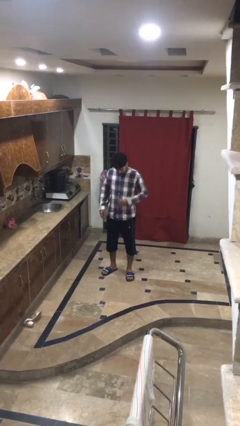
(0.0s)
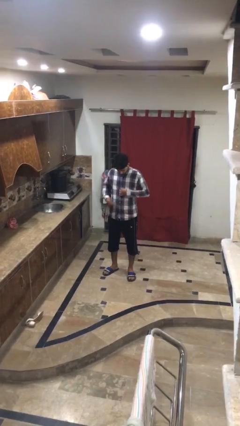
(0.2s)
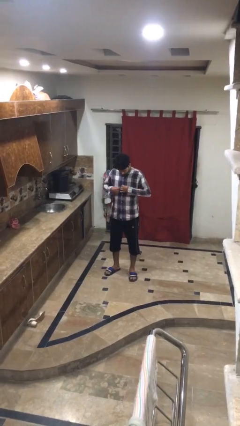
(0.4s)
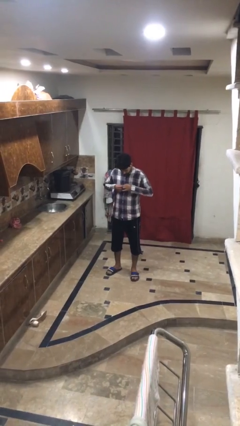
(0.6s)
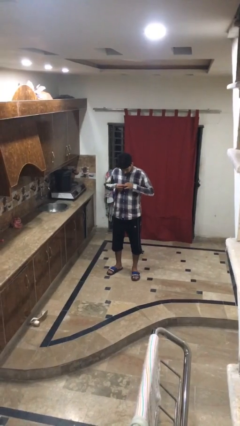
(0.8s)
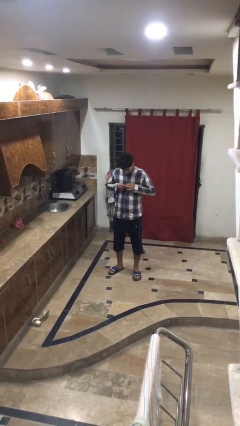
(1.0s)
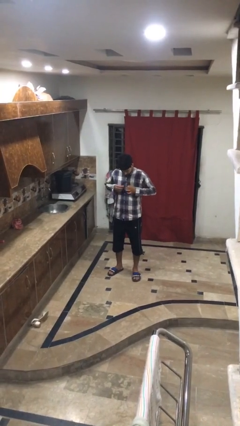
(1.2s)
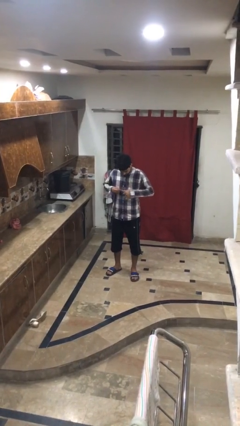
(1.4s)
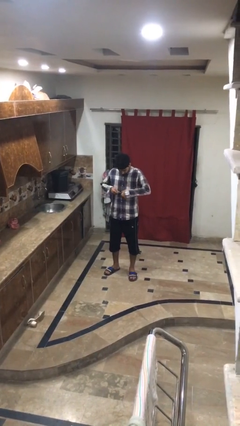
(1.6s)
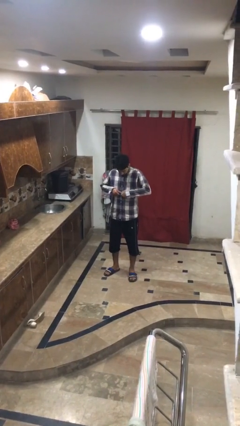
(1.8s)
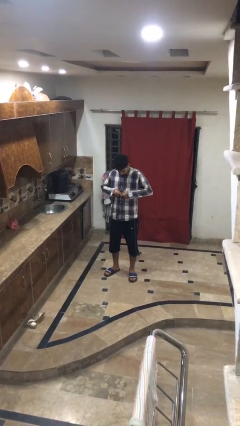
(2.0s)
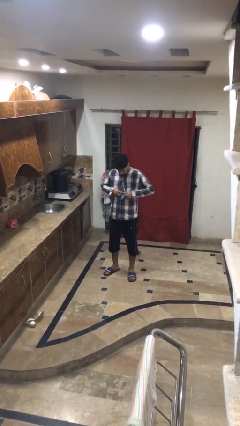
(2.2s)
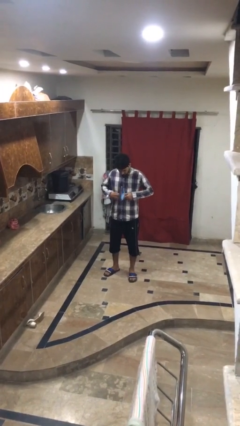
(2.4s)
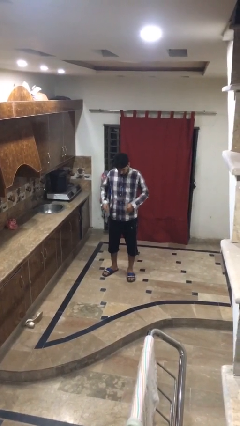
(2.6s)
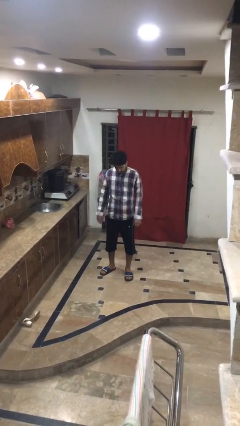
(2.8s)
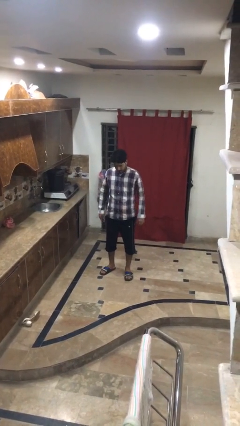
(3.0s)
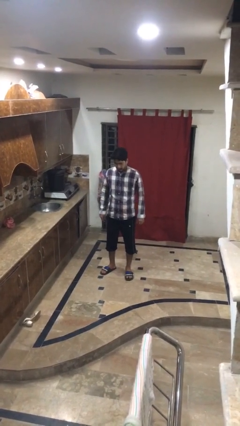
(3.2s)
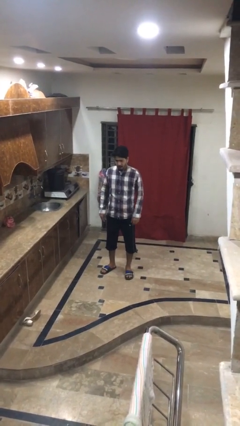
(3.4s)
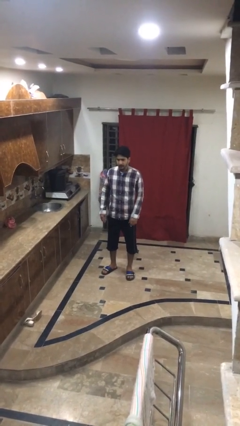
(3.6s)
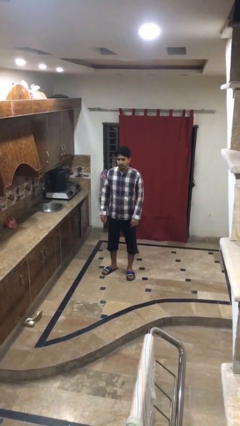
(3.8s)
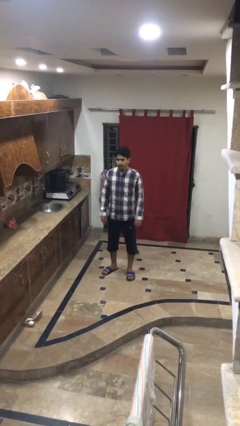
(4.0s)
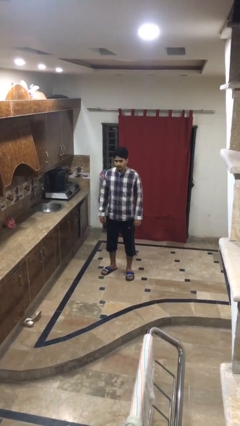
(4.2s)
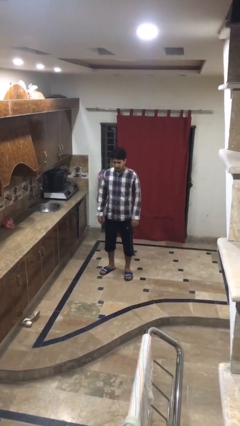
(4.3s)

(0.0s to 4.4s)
person unbuttons shirt

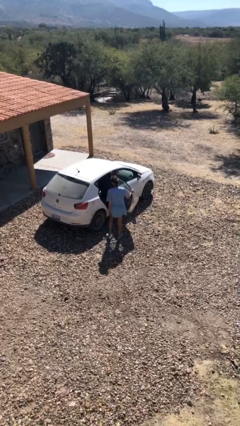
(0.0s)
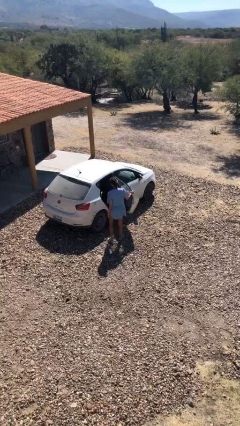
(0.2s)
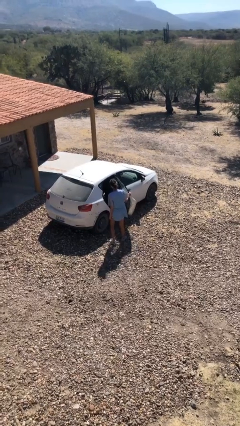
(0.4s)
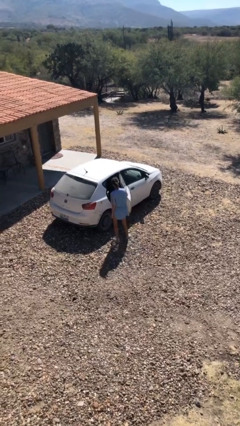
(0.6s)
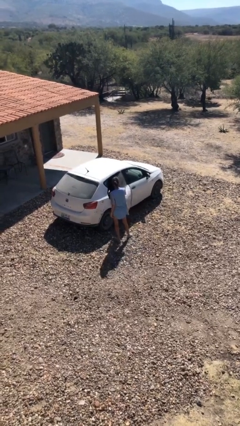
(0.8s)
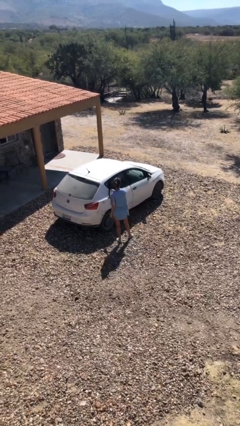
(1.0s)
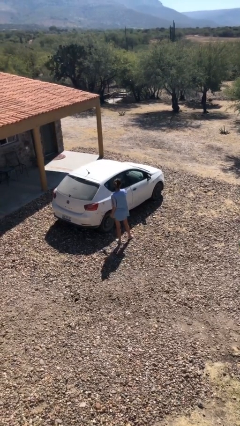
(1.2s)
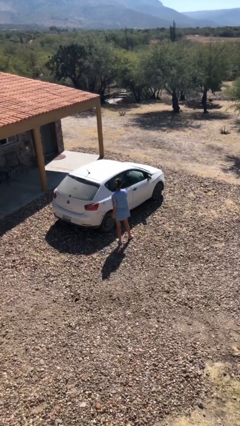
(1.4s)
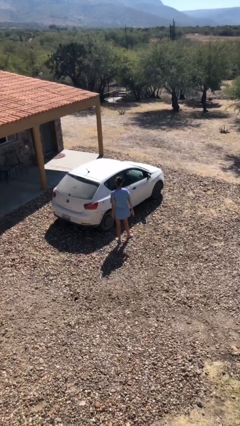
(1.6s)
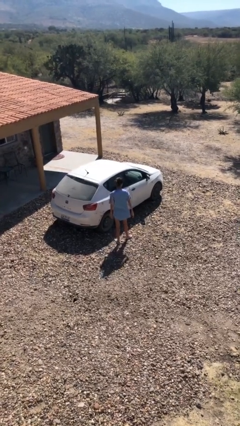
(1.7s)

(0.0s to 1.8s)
person closes car door

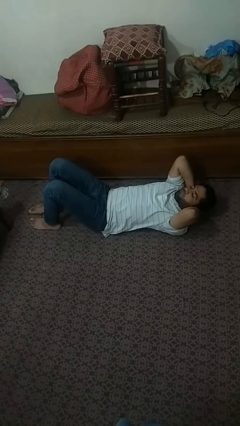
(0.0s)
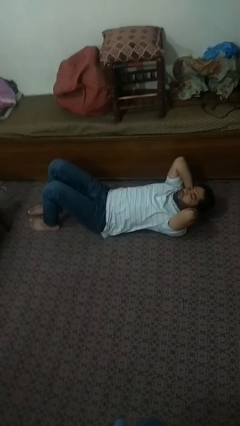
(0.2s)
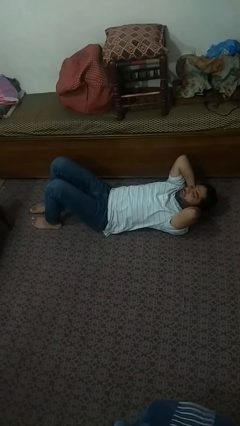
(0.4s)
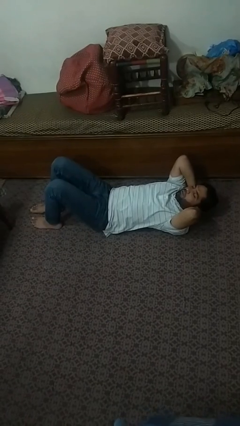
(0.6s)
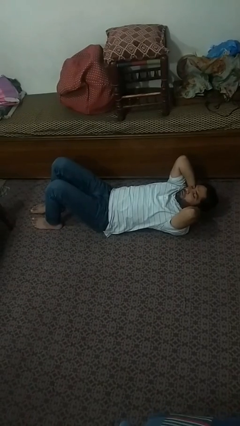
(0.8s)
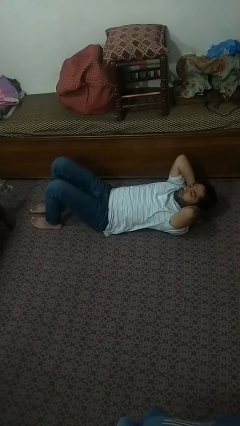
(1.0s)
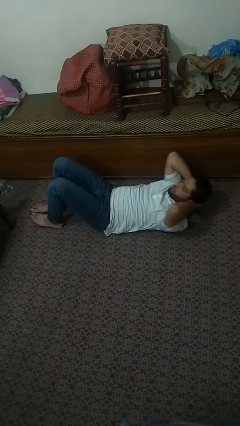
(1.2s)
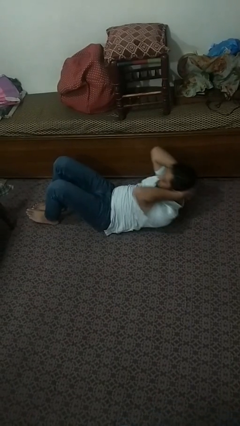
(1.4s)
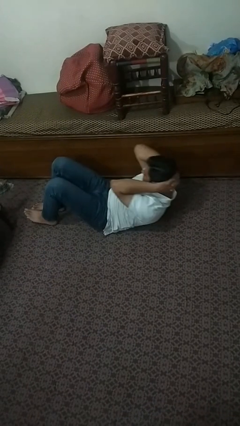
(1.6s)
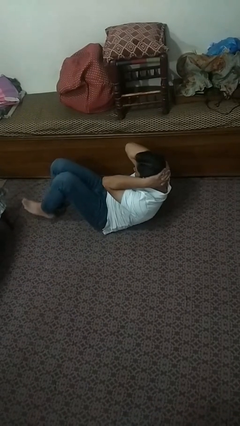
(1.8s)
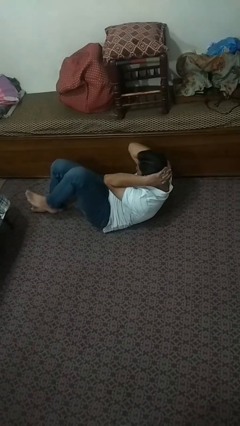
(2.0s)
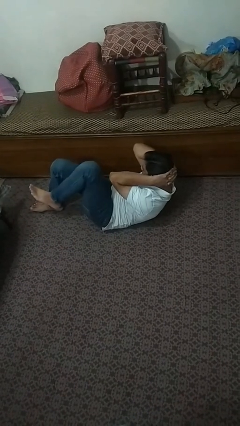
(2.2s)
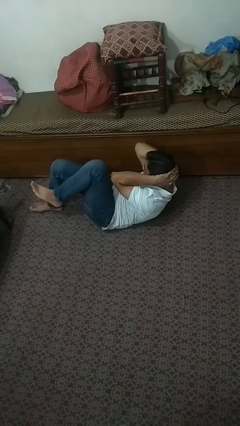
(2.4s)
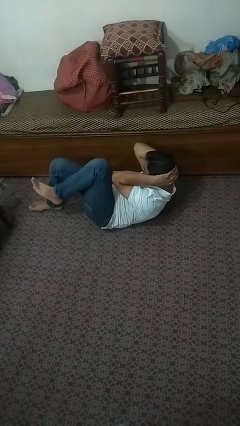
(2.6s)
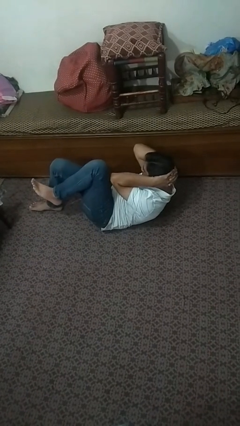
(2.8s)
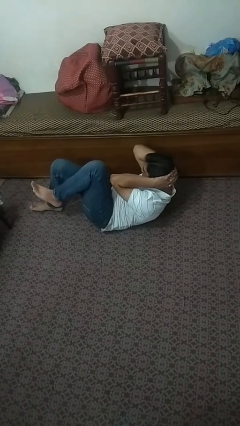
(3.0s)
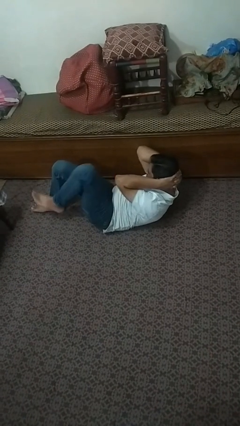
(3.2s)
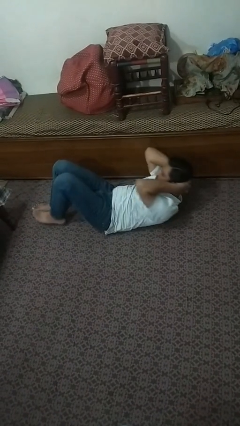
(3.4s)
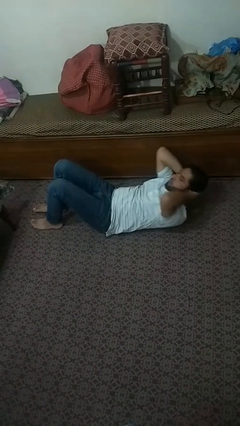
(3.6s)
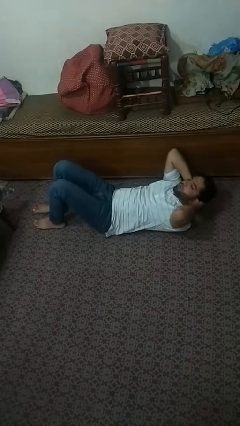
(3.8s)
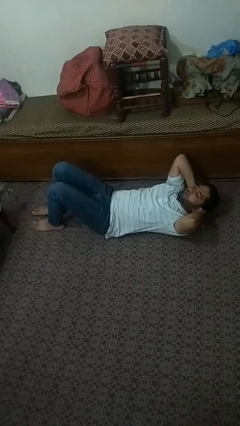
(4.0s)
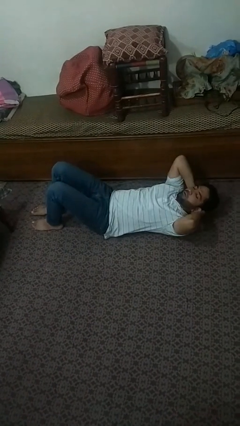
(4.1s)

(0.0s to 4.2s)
person exercises with situp

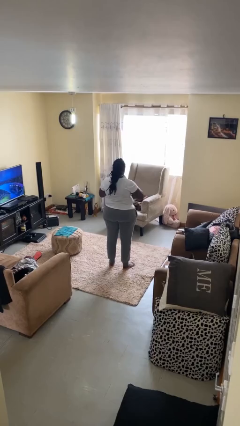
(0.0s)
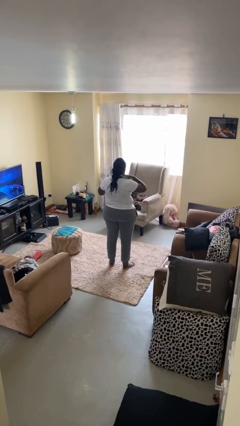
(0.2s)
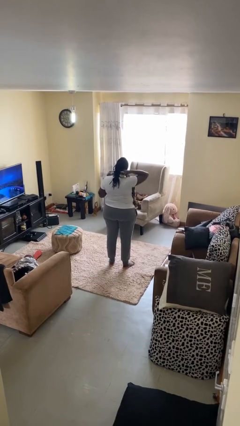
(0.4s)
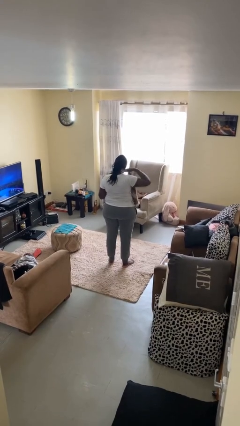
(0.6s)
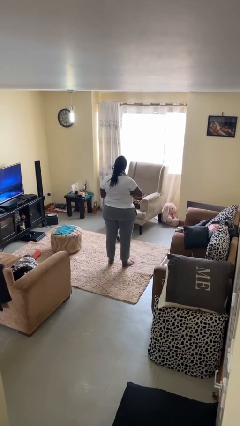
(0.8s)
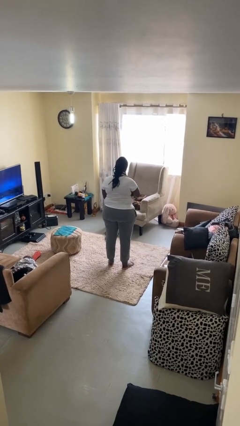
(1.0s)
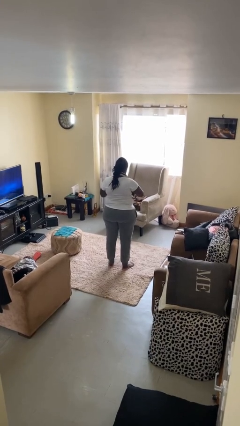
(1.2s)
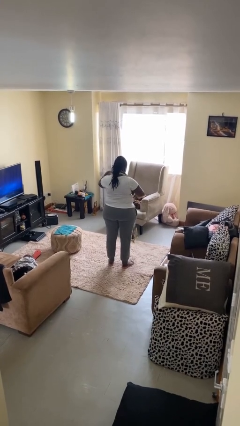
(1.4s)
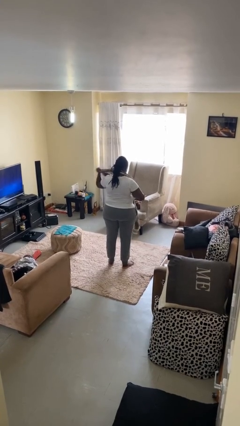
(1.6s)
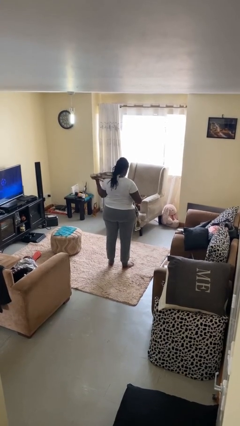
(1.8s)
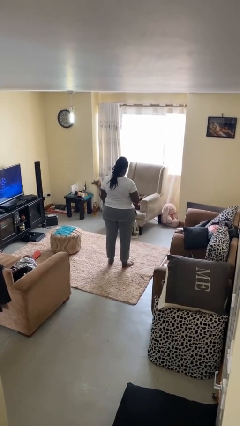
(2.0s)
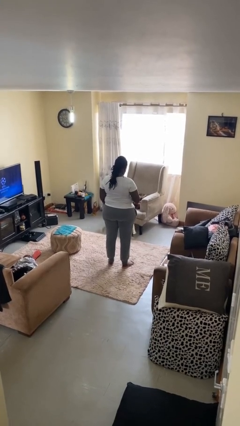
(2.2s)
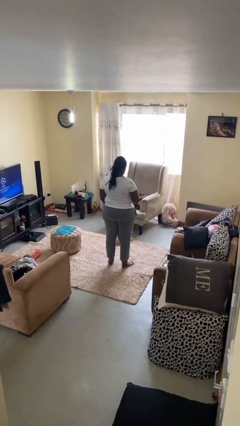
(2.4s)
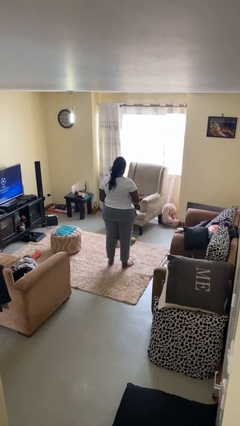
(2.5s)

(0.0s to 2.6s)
person takes off scarf

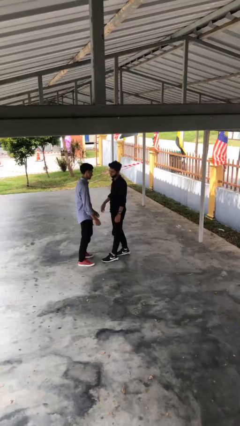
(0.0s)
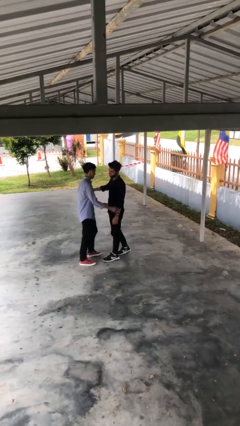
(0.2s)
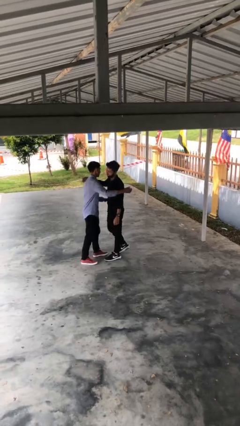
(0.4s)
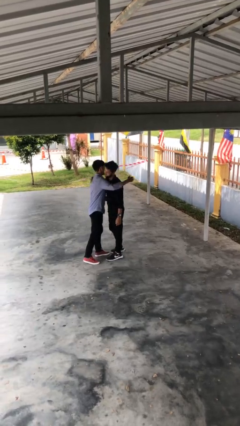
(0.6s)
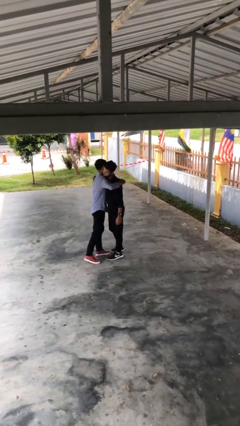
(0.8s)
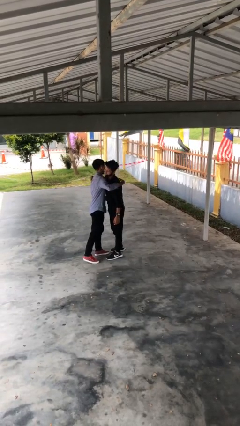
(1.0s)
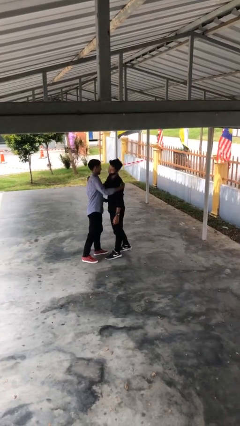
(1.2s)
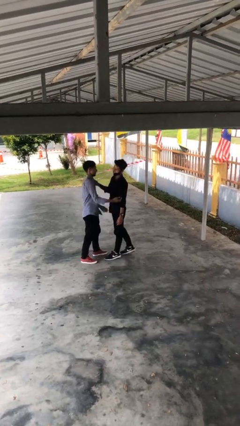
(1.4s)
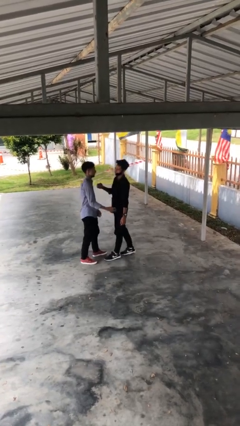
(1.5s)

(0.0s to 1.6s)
person embraces person

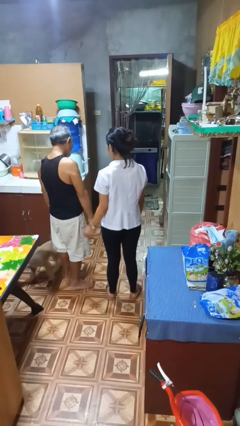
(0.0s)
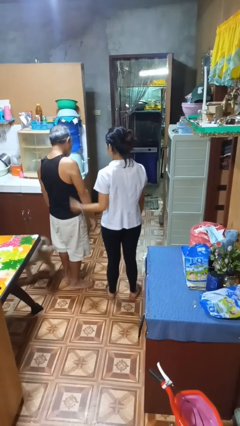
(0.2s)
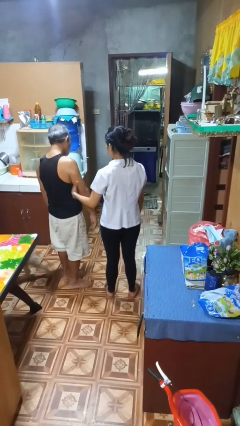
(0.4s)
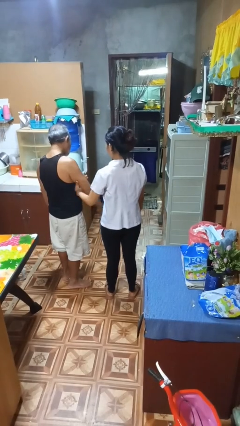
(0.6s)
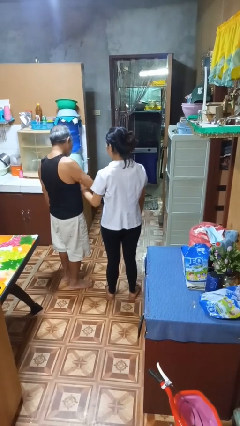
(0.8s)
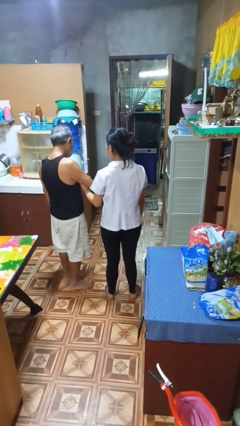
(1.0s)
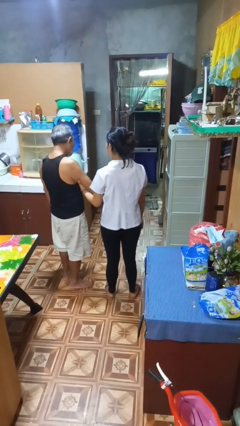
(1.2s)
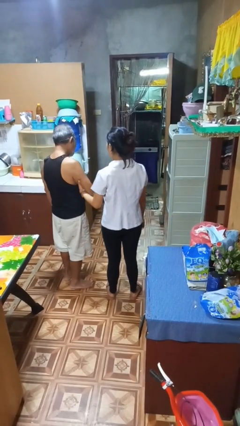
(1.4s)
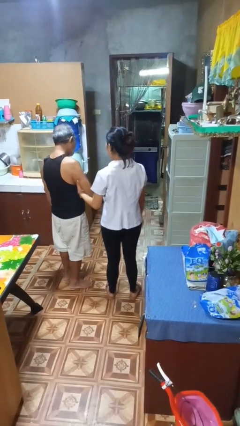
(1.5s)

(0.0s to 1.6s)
person grabs person by bicep

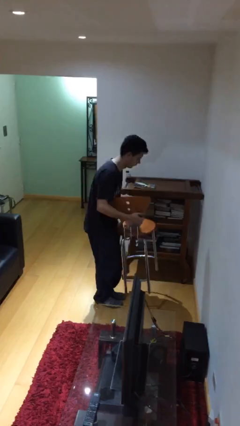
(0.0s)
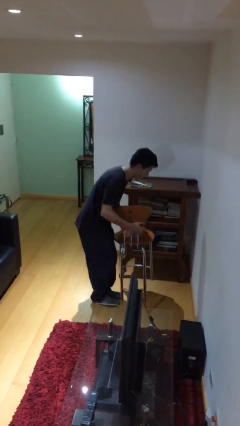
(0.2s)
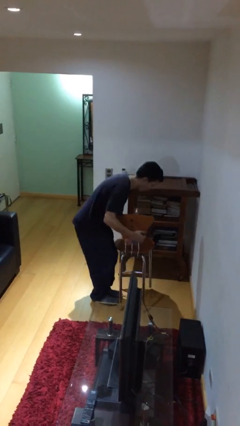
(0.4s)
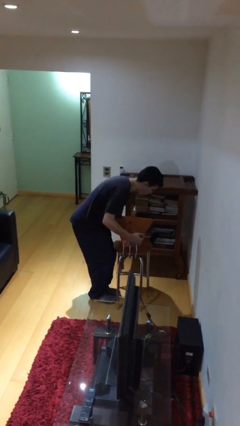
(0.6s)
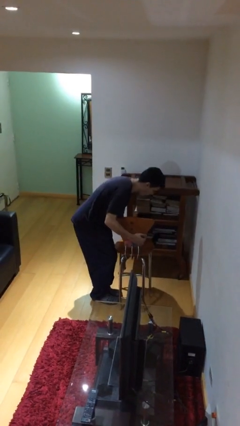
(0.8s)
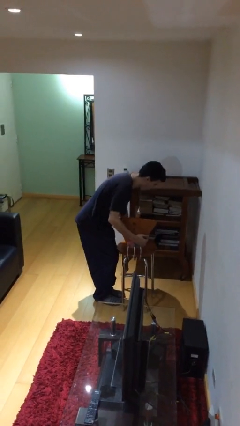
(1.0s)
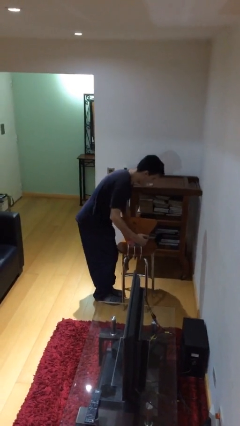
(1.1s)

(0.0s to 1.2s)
person puts down object on floor
